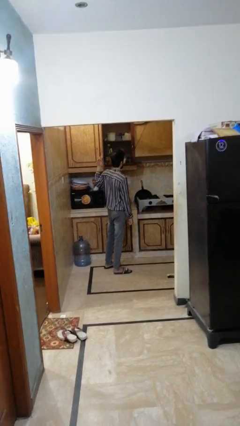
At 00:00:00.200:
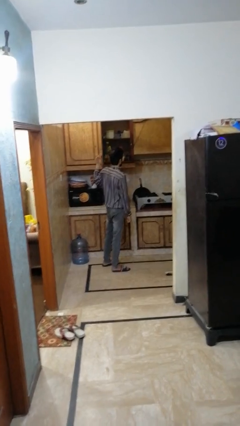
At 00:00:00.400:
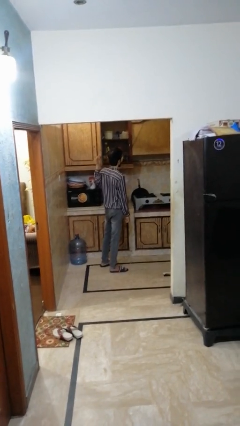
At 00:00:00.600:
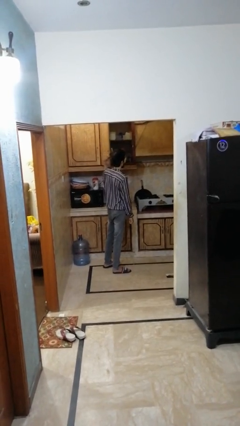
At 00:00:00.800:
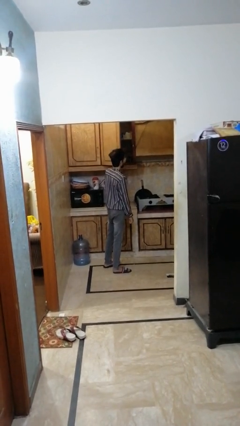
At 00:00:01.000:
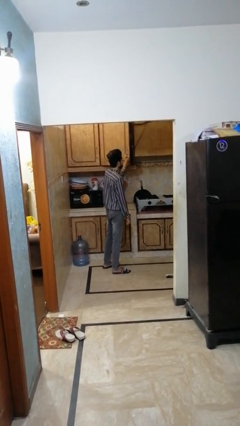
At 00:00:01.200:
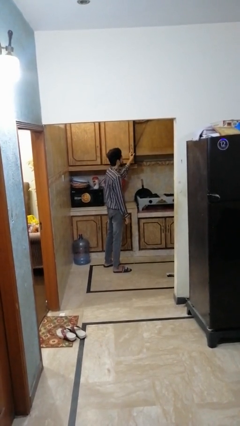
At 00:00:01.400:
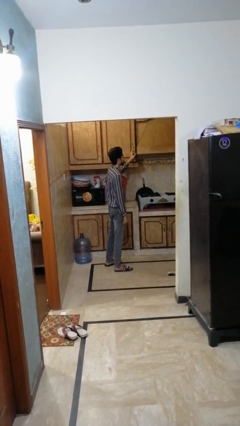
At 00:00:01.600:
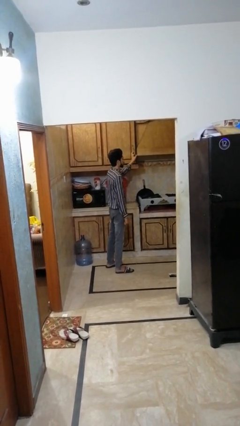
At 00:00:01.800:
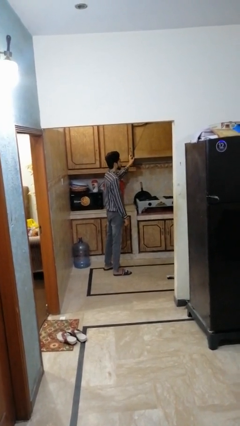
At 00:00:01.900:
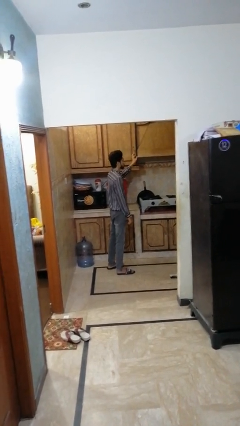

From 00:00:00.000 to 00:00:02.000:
person closes cabinet

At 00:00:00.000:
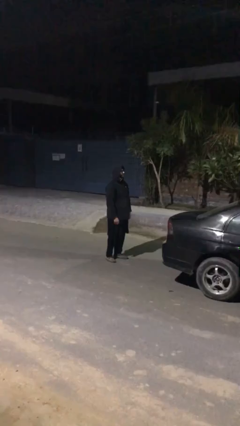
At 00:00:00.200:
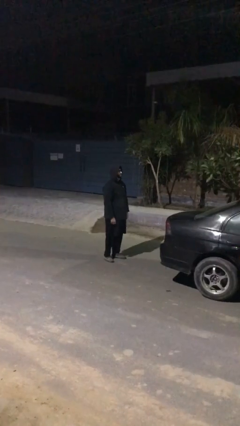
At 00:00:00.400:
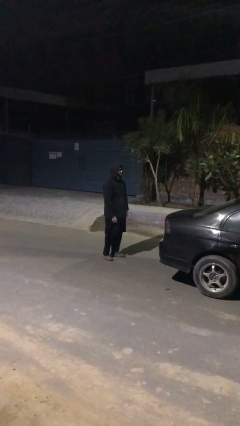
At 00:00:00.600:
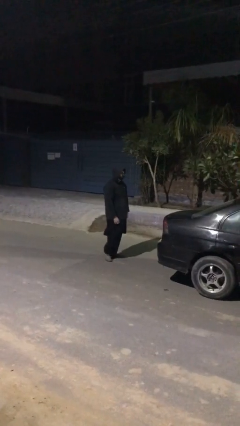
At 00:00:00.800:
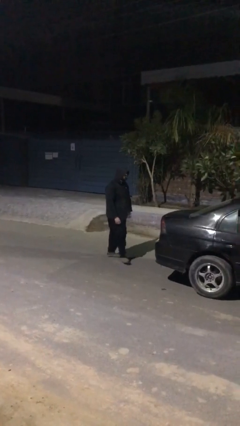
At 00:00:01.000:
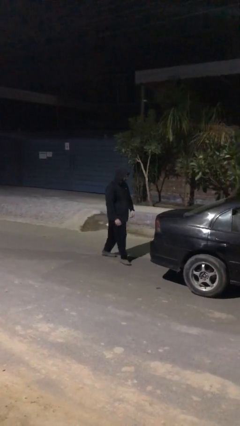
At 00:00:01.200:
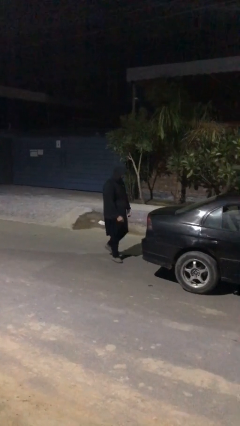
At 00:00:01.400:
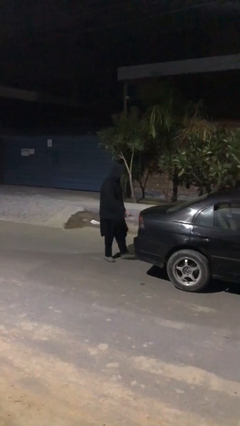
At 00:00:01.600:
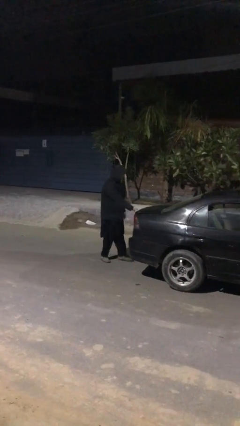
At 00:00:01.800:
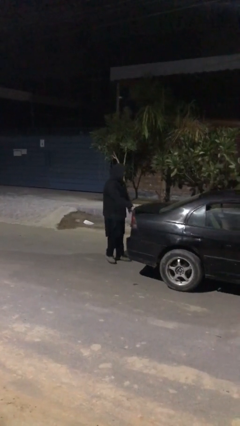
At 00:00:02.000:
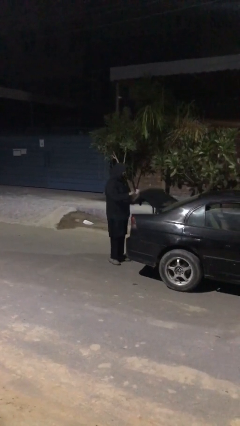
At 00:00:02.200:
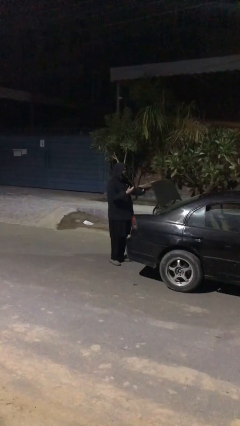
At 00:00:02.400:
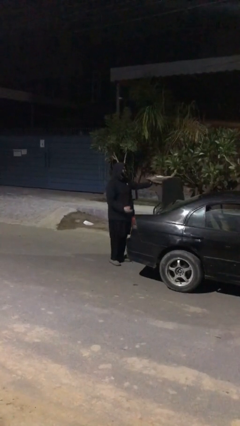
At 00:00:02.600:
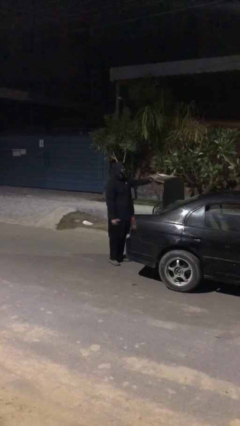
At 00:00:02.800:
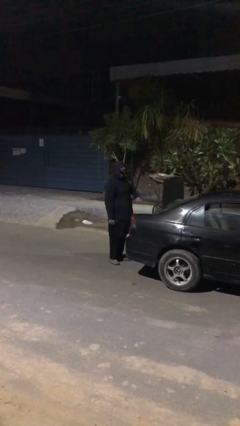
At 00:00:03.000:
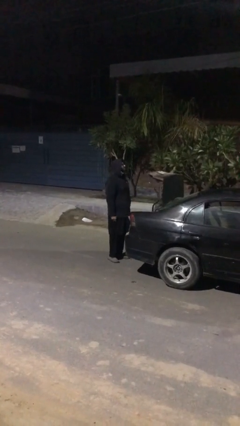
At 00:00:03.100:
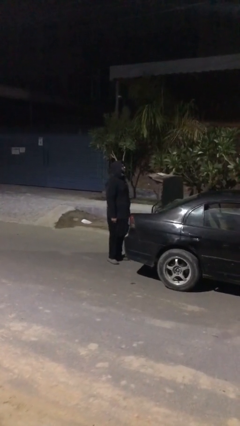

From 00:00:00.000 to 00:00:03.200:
person opens car trunk

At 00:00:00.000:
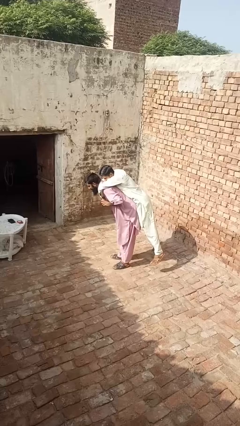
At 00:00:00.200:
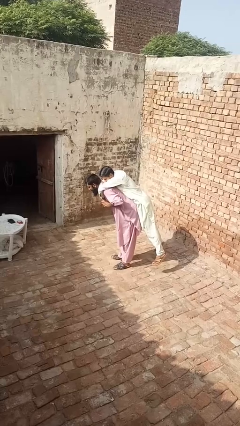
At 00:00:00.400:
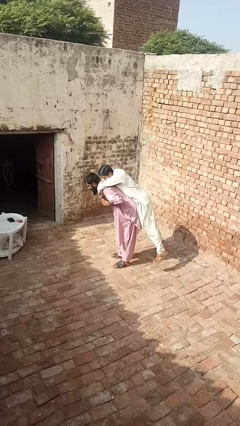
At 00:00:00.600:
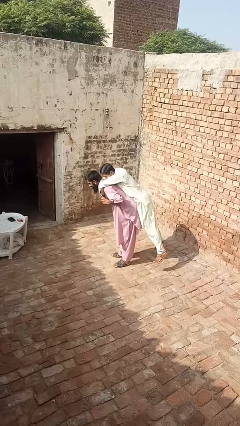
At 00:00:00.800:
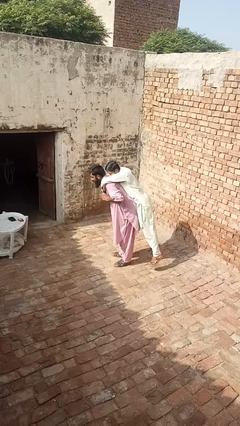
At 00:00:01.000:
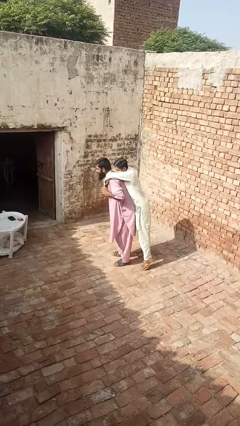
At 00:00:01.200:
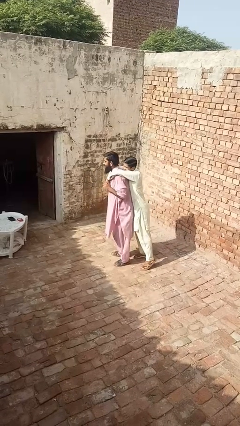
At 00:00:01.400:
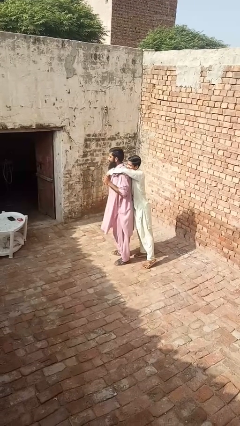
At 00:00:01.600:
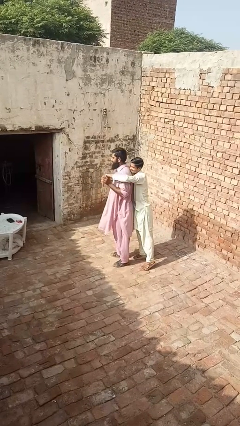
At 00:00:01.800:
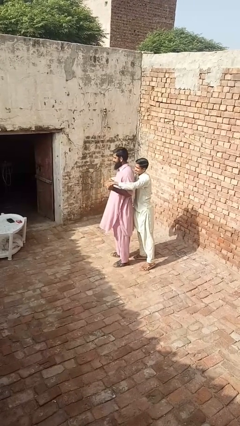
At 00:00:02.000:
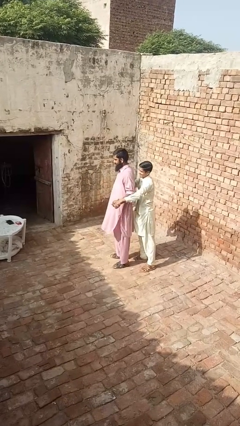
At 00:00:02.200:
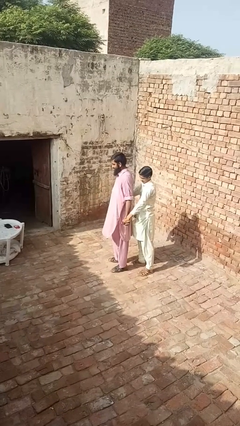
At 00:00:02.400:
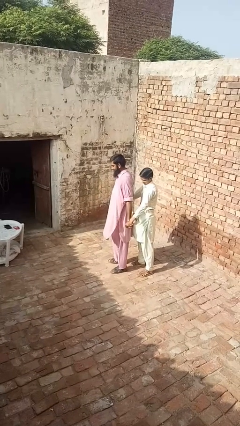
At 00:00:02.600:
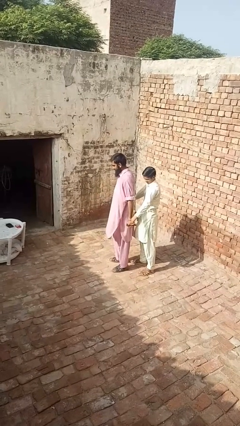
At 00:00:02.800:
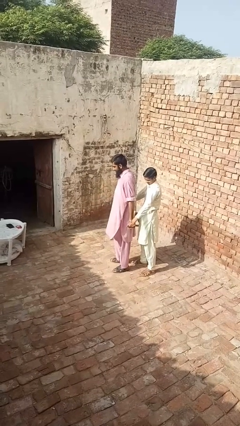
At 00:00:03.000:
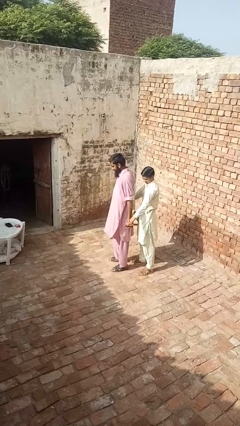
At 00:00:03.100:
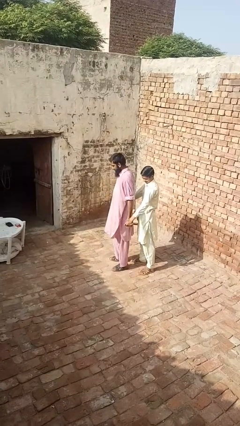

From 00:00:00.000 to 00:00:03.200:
person puts down person

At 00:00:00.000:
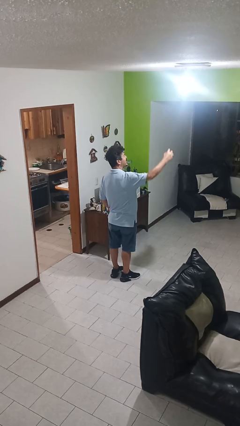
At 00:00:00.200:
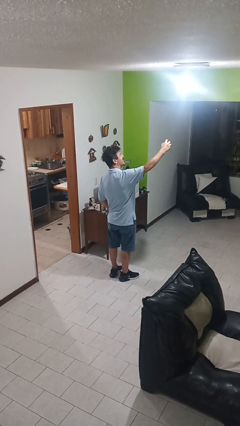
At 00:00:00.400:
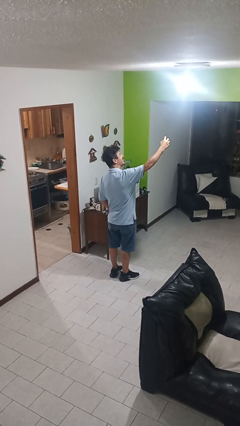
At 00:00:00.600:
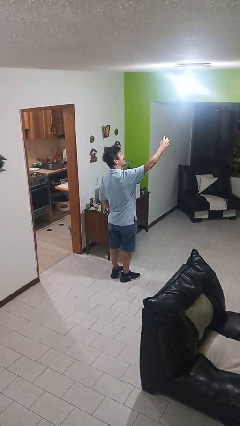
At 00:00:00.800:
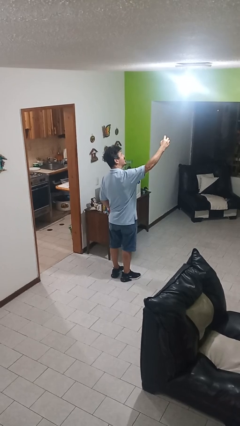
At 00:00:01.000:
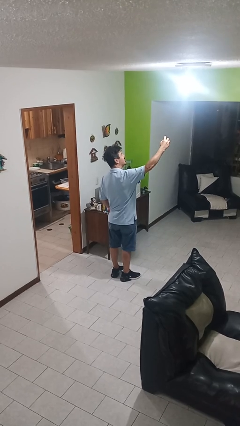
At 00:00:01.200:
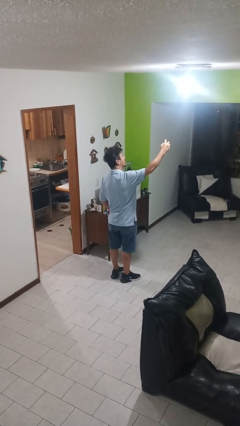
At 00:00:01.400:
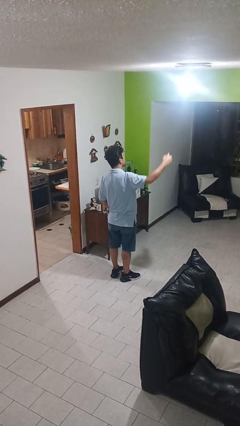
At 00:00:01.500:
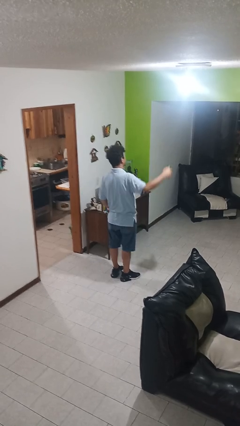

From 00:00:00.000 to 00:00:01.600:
person takes selfie

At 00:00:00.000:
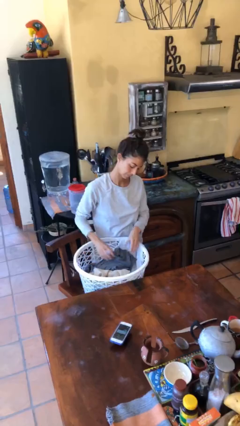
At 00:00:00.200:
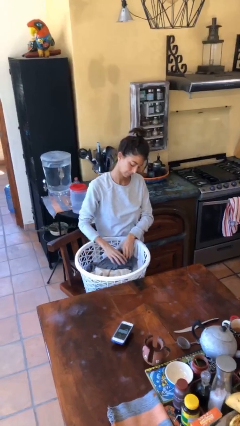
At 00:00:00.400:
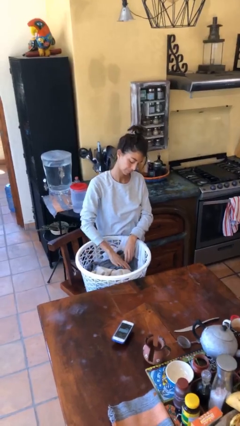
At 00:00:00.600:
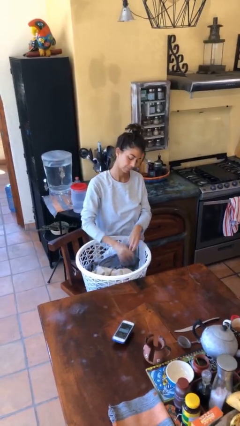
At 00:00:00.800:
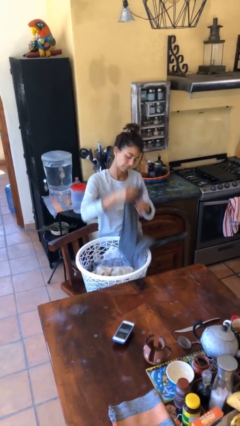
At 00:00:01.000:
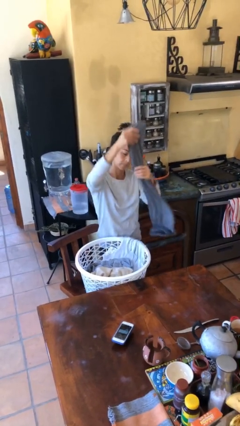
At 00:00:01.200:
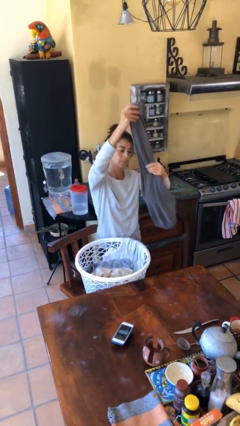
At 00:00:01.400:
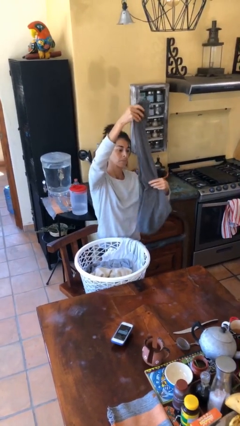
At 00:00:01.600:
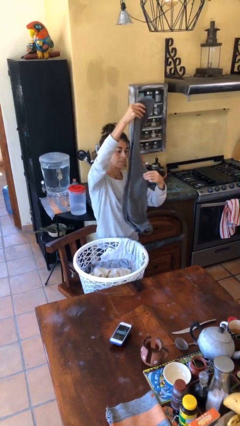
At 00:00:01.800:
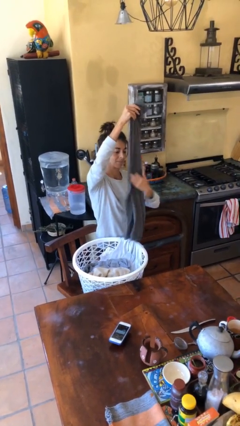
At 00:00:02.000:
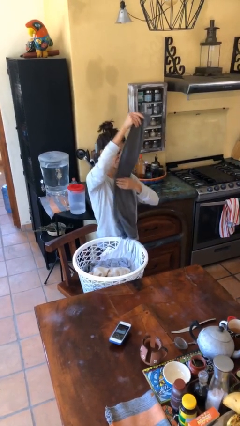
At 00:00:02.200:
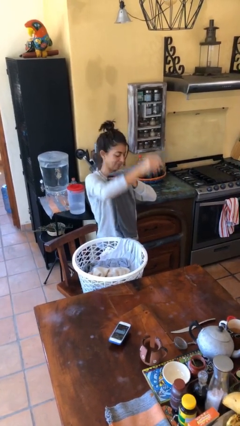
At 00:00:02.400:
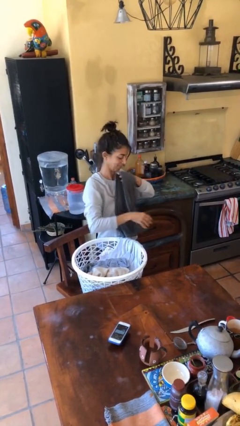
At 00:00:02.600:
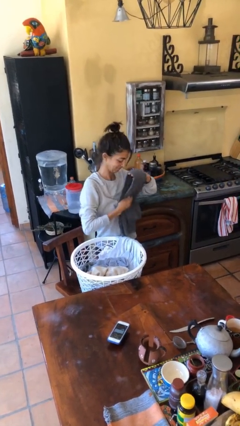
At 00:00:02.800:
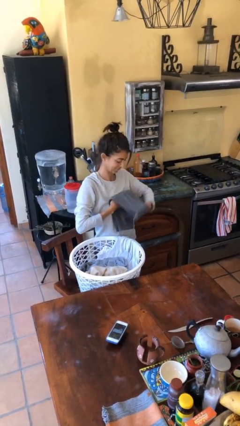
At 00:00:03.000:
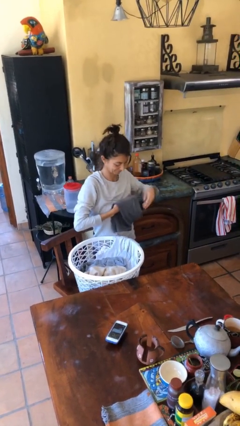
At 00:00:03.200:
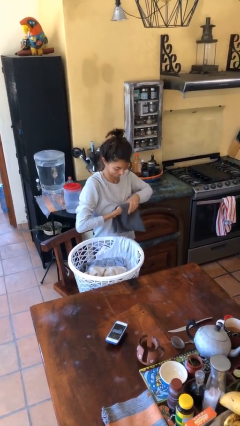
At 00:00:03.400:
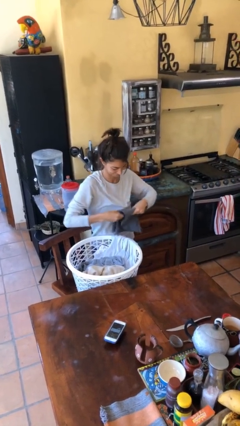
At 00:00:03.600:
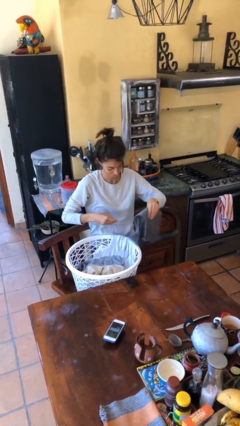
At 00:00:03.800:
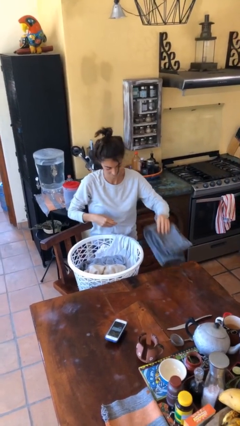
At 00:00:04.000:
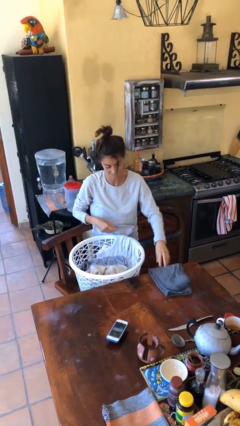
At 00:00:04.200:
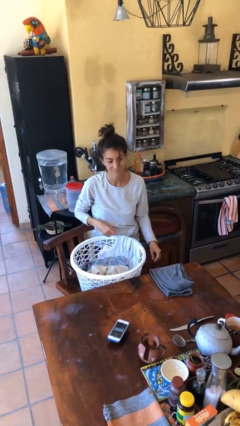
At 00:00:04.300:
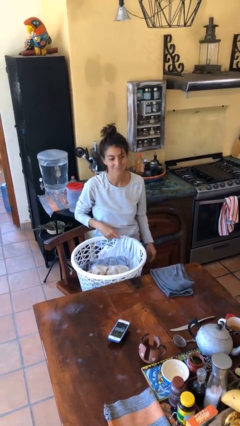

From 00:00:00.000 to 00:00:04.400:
person folds pants

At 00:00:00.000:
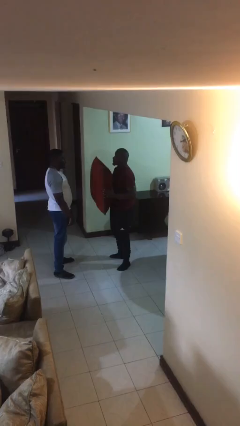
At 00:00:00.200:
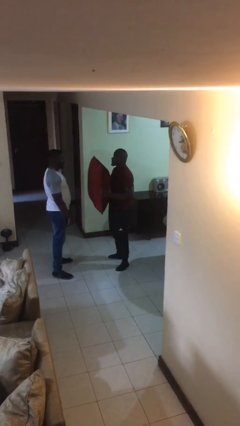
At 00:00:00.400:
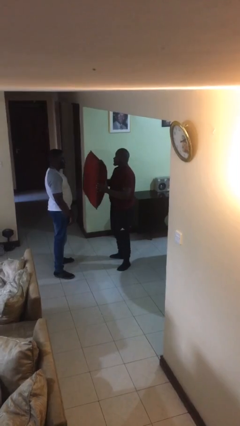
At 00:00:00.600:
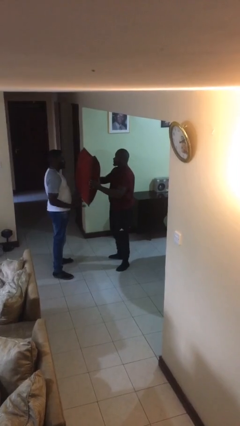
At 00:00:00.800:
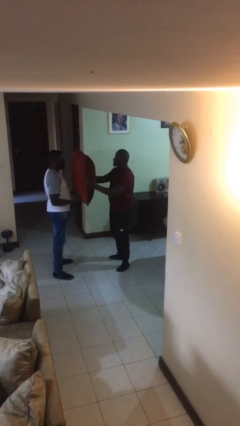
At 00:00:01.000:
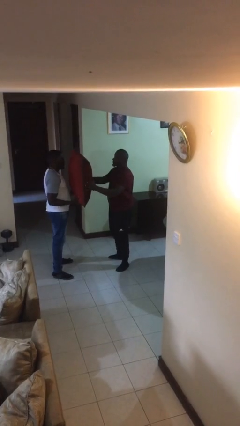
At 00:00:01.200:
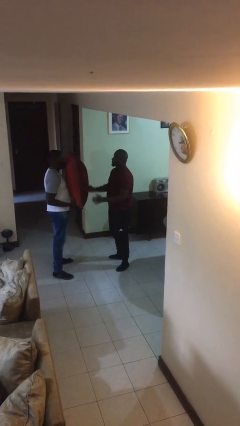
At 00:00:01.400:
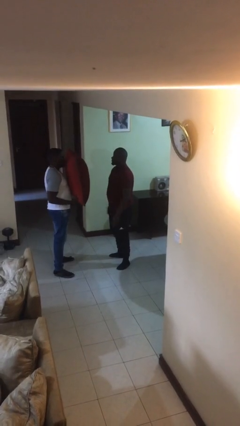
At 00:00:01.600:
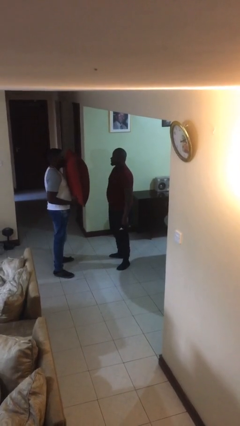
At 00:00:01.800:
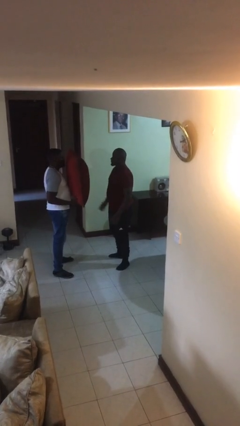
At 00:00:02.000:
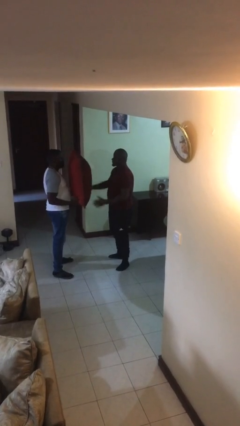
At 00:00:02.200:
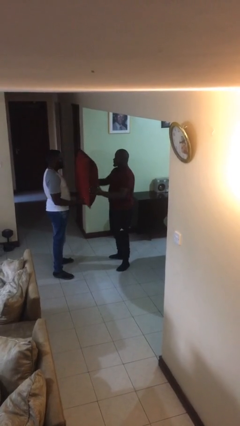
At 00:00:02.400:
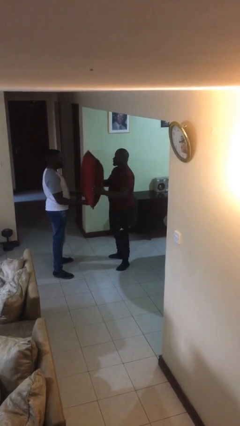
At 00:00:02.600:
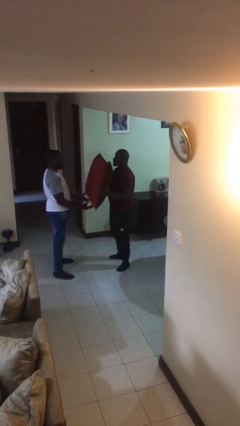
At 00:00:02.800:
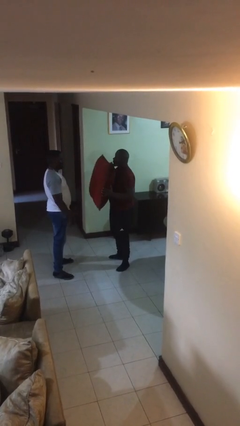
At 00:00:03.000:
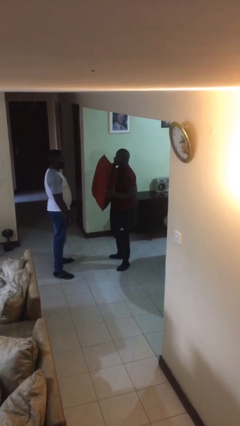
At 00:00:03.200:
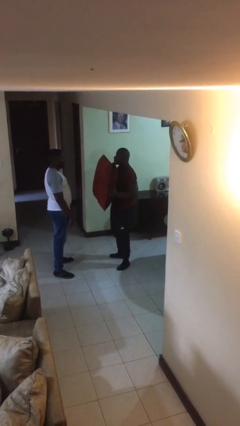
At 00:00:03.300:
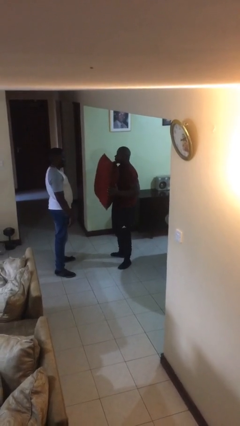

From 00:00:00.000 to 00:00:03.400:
person transfers object to person
